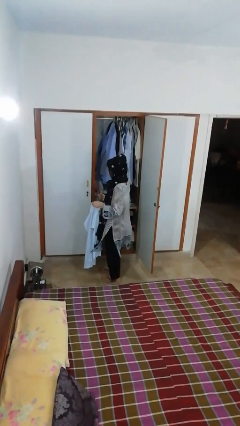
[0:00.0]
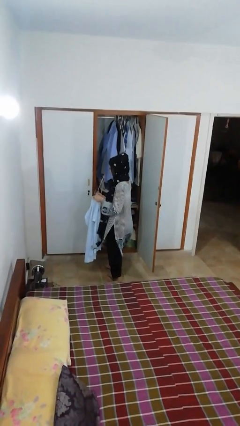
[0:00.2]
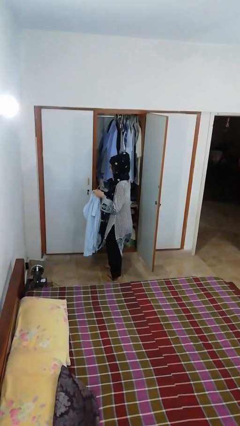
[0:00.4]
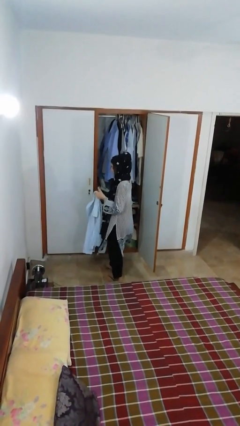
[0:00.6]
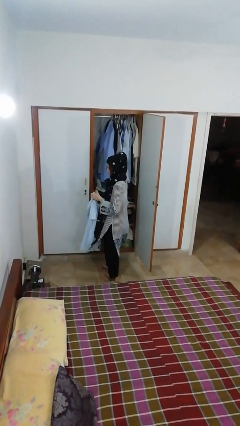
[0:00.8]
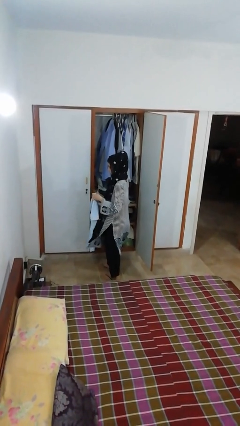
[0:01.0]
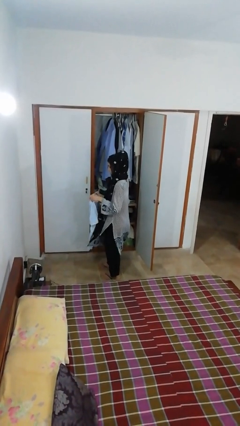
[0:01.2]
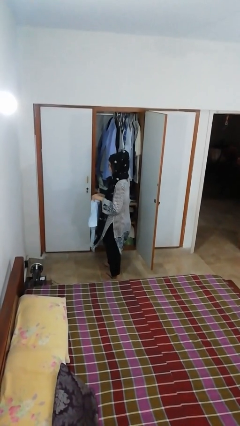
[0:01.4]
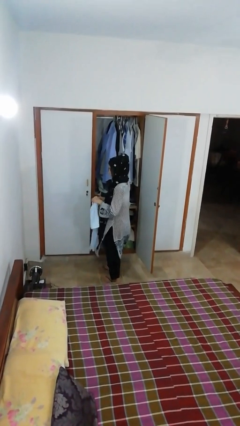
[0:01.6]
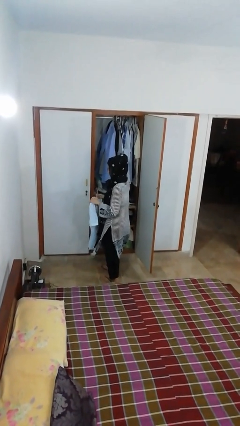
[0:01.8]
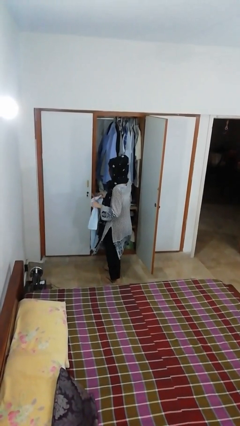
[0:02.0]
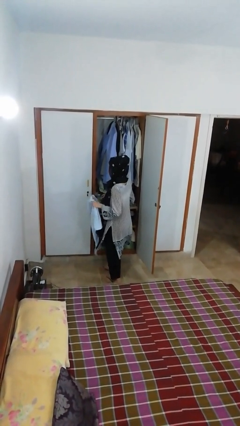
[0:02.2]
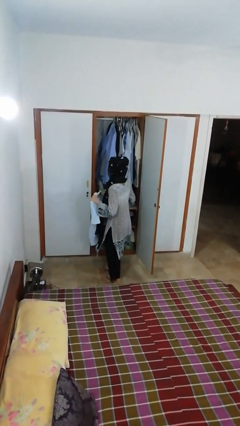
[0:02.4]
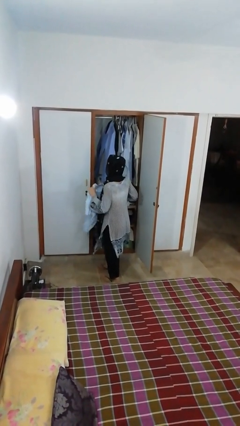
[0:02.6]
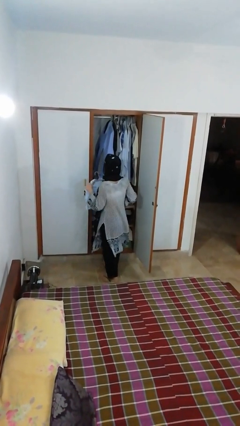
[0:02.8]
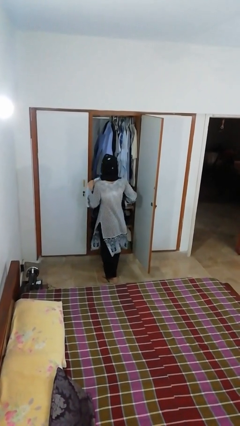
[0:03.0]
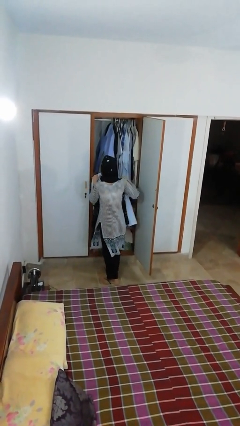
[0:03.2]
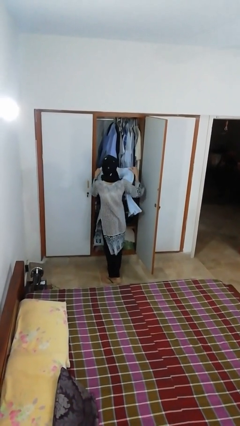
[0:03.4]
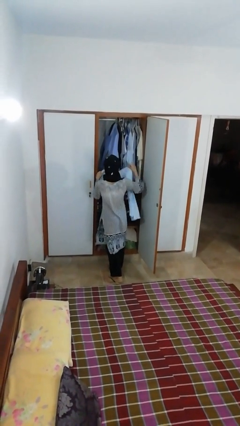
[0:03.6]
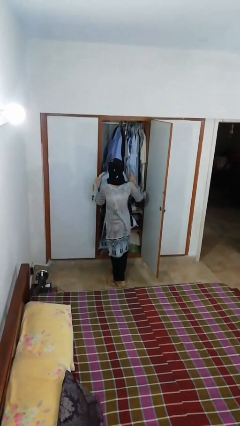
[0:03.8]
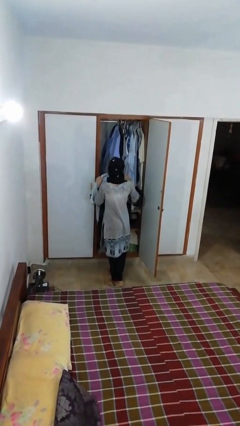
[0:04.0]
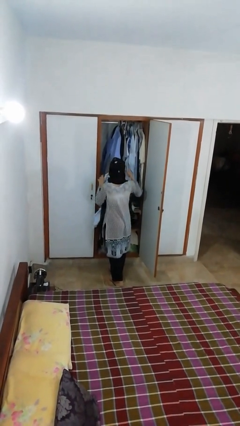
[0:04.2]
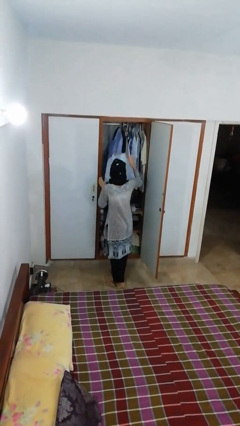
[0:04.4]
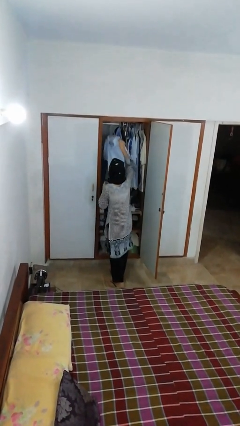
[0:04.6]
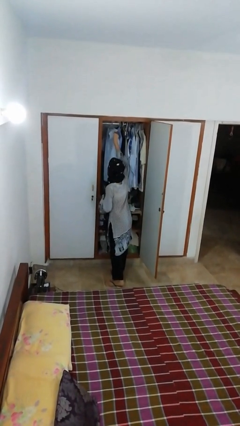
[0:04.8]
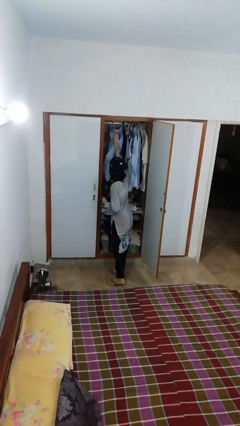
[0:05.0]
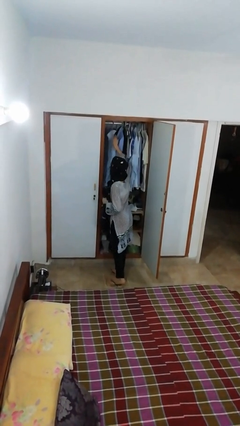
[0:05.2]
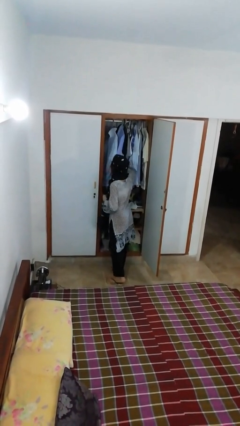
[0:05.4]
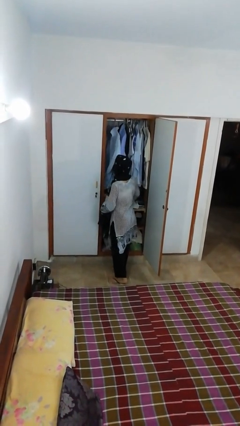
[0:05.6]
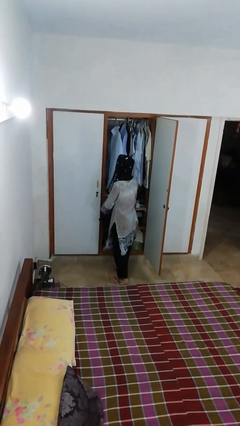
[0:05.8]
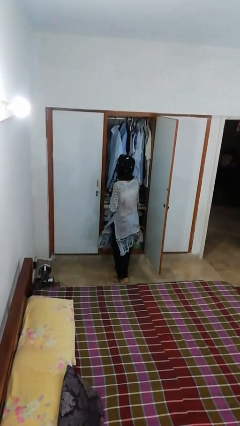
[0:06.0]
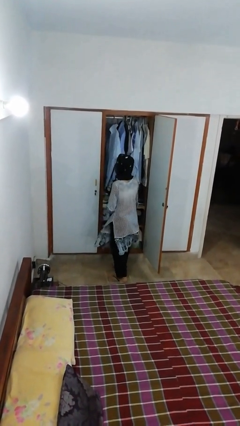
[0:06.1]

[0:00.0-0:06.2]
person puts clothes into closet

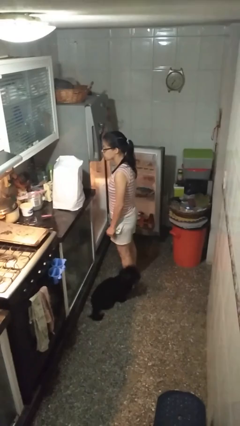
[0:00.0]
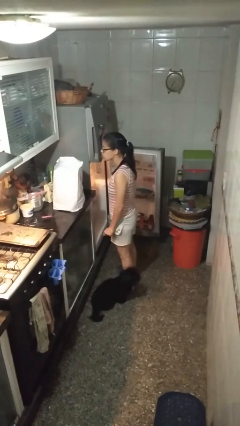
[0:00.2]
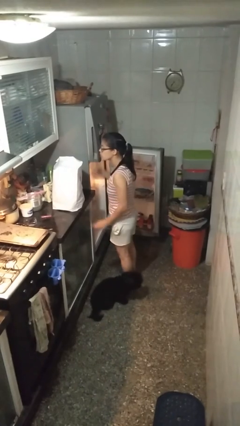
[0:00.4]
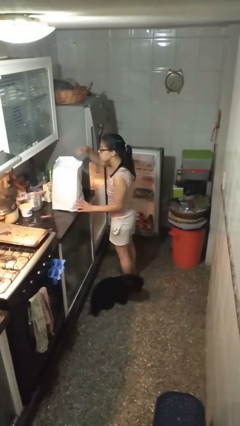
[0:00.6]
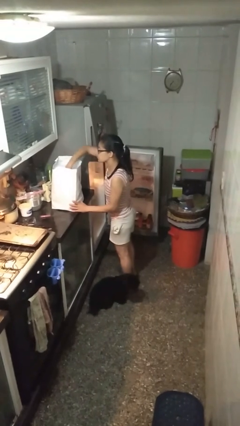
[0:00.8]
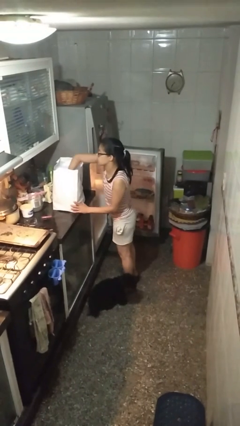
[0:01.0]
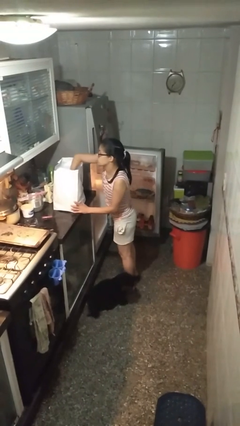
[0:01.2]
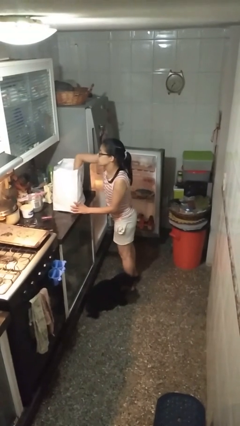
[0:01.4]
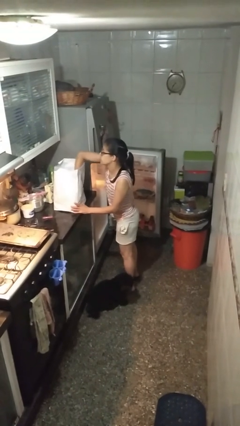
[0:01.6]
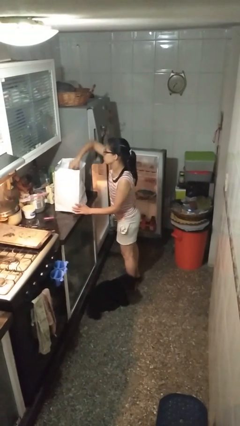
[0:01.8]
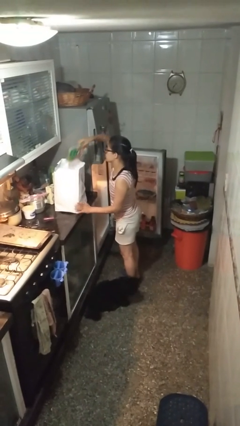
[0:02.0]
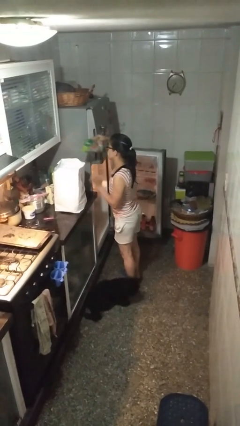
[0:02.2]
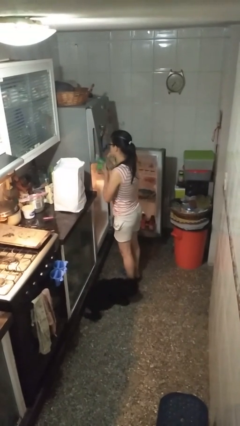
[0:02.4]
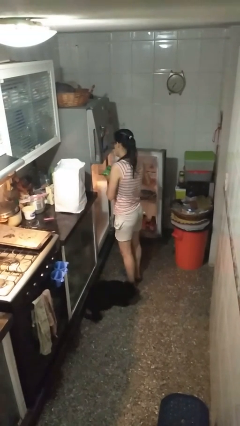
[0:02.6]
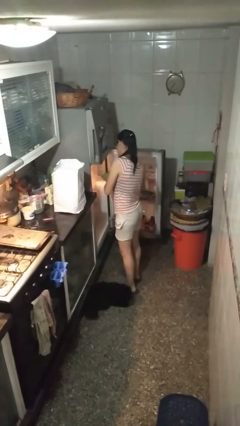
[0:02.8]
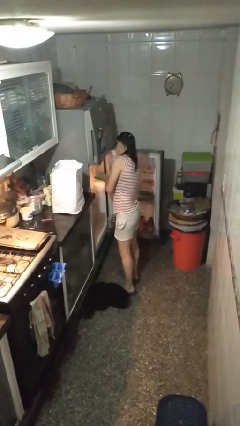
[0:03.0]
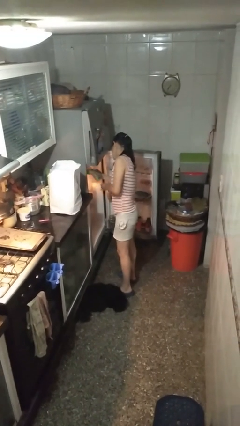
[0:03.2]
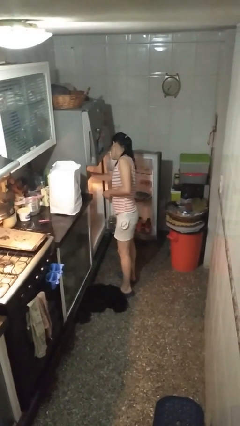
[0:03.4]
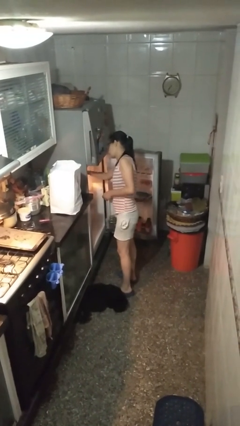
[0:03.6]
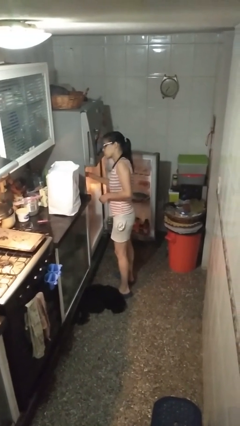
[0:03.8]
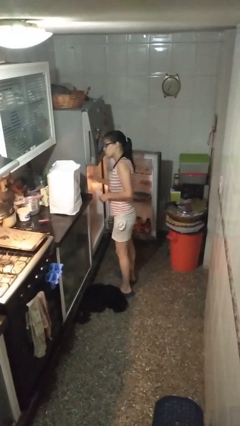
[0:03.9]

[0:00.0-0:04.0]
person loads groceries into refrigerator

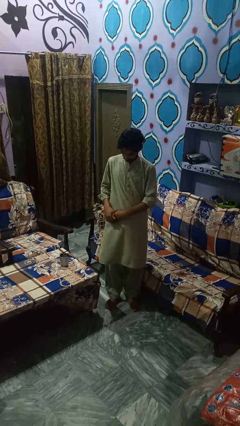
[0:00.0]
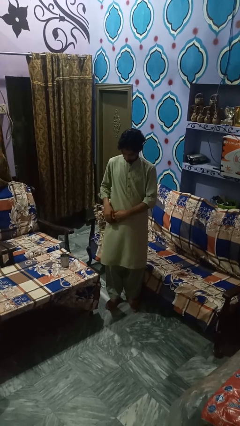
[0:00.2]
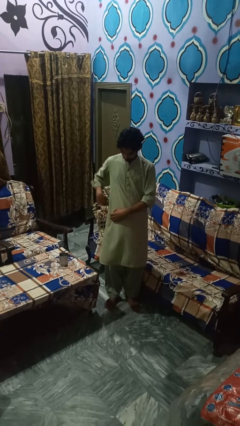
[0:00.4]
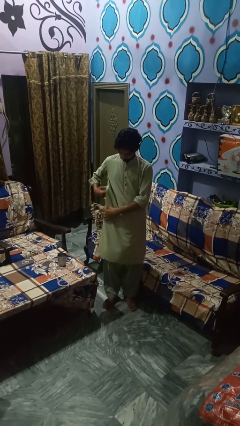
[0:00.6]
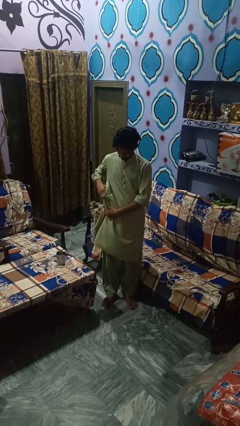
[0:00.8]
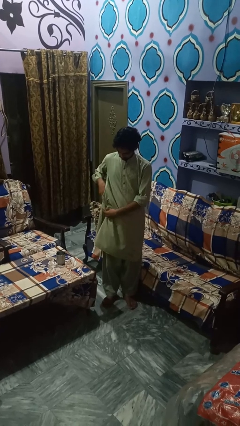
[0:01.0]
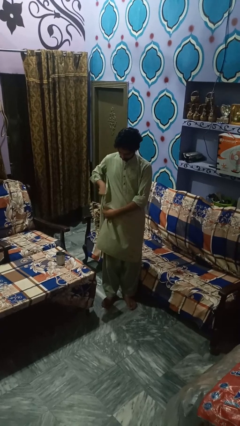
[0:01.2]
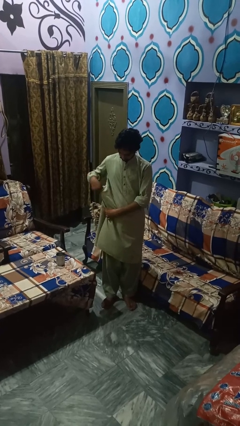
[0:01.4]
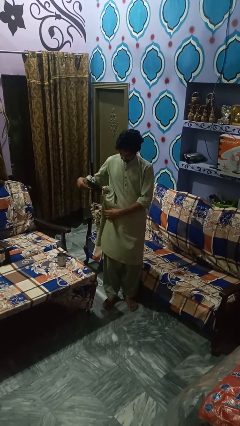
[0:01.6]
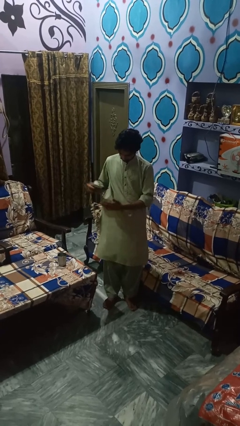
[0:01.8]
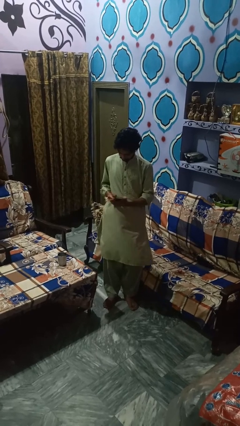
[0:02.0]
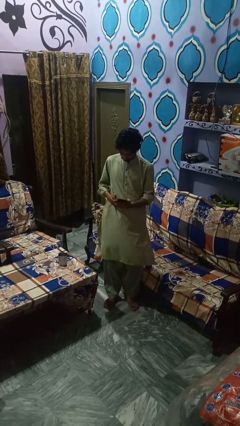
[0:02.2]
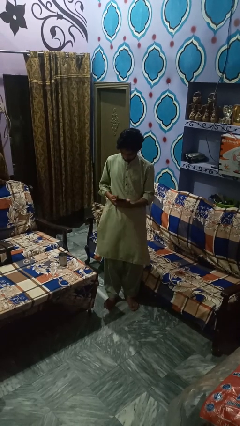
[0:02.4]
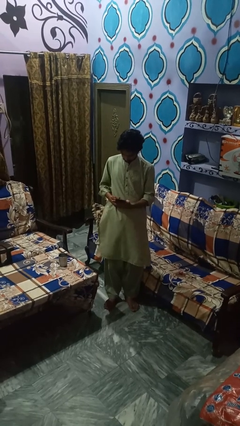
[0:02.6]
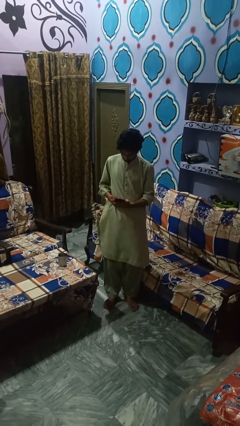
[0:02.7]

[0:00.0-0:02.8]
person takes phone from pocket

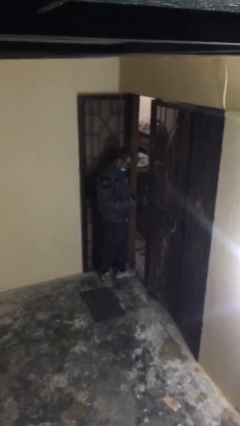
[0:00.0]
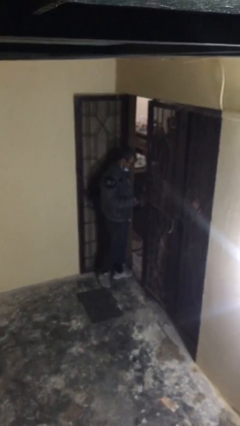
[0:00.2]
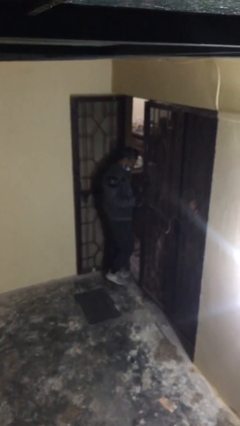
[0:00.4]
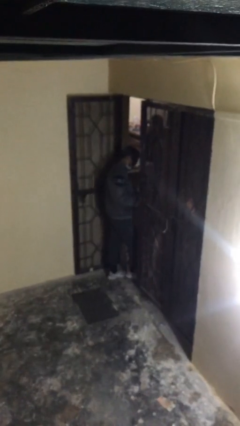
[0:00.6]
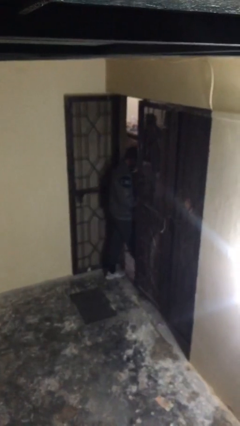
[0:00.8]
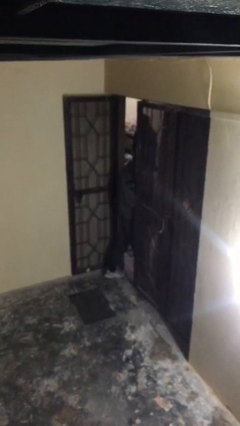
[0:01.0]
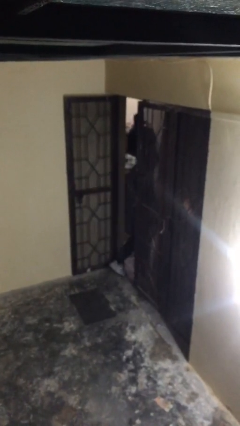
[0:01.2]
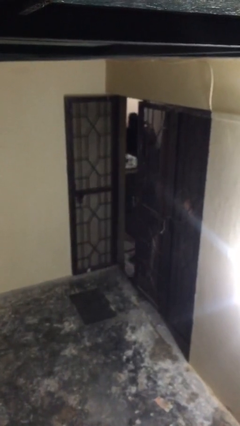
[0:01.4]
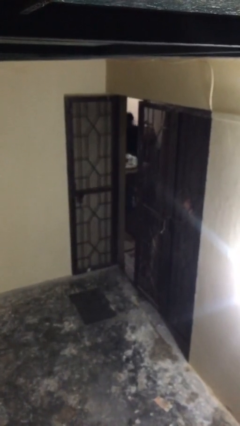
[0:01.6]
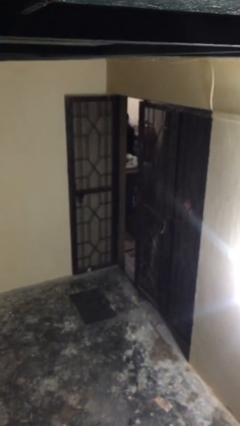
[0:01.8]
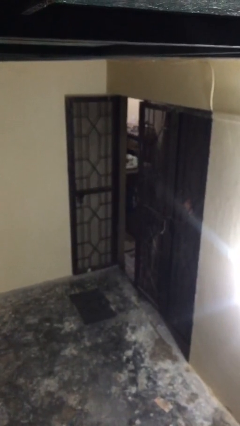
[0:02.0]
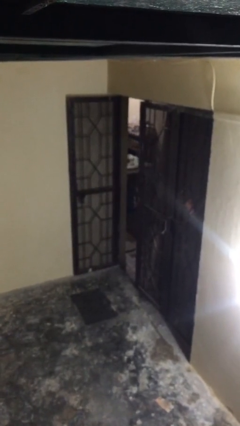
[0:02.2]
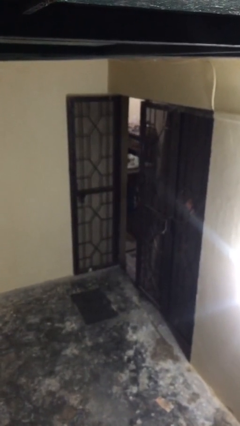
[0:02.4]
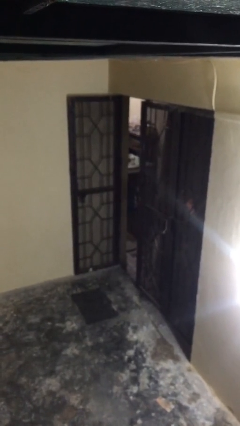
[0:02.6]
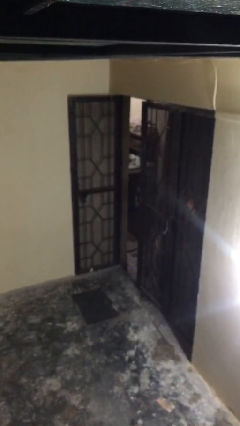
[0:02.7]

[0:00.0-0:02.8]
person exits scene through structure

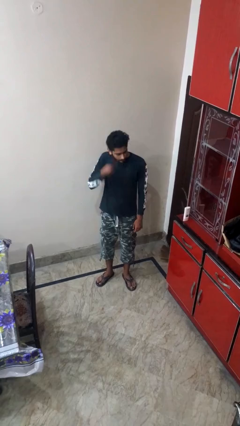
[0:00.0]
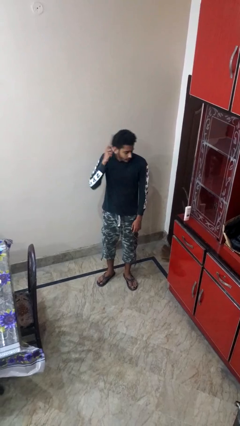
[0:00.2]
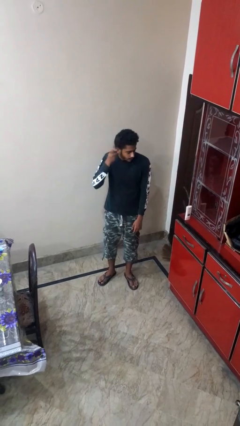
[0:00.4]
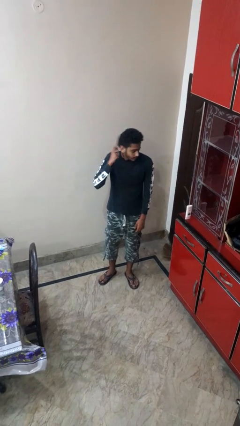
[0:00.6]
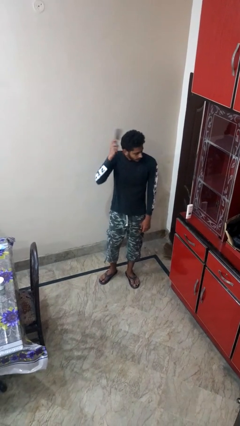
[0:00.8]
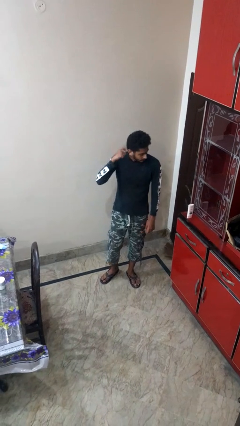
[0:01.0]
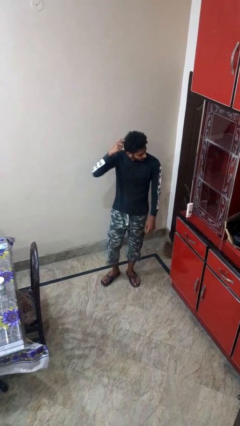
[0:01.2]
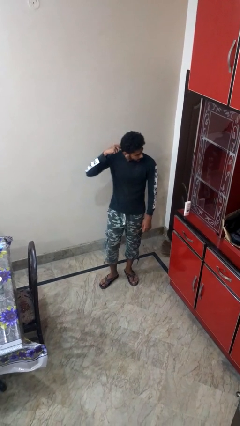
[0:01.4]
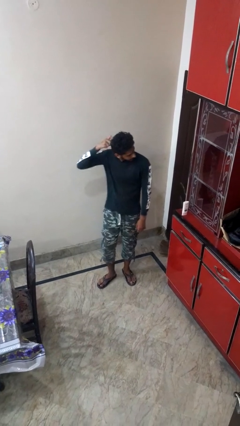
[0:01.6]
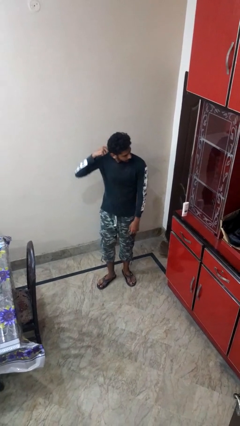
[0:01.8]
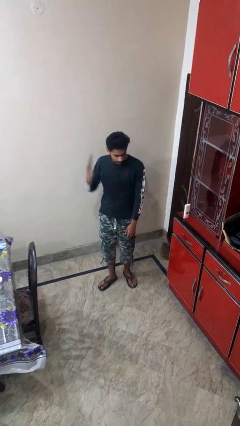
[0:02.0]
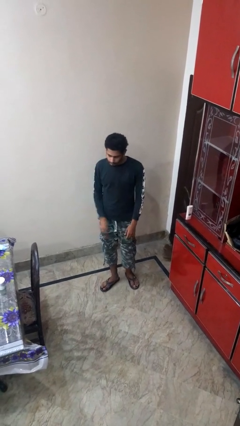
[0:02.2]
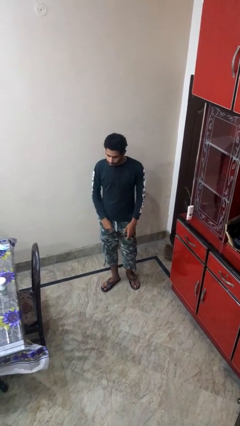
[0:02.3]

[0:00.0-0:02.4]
person brushes hair
